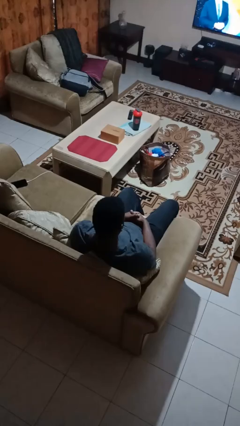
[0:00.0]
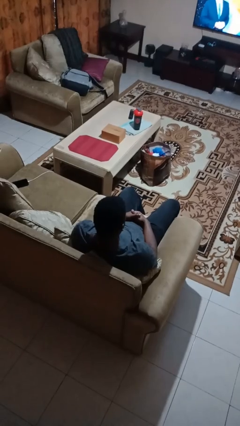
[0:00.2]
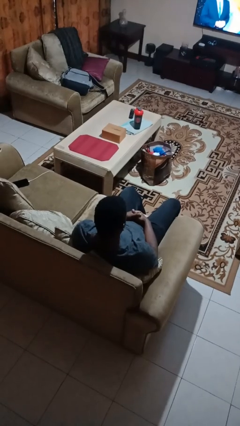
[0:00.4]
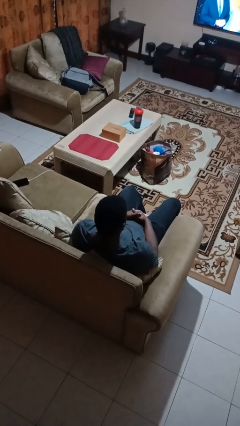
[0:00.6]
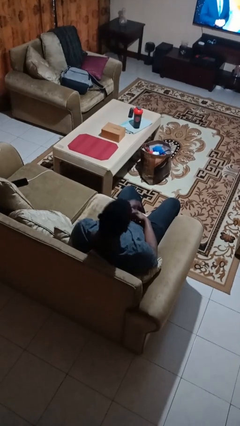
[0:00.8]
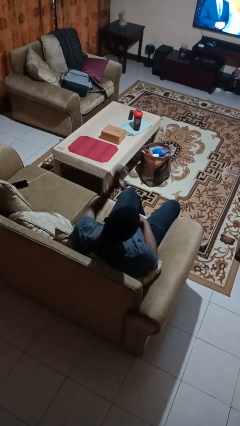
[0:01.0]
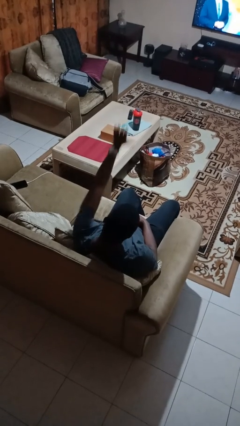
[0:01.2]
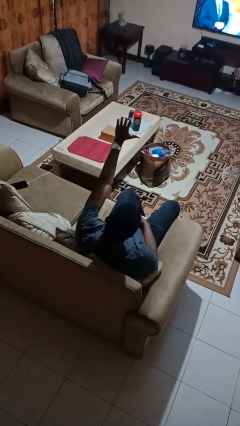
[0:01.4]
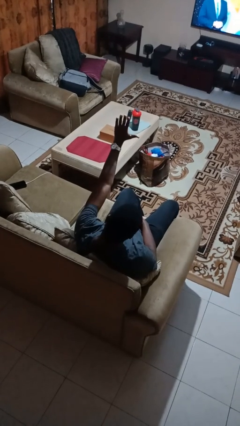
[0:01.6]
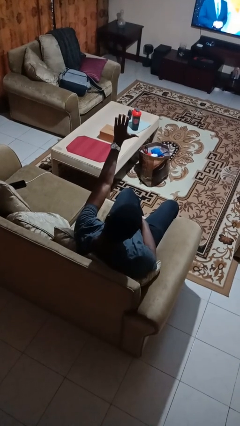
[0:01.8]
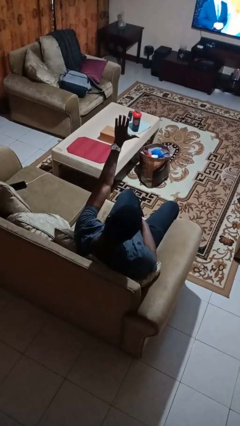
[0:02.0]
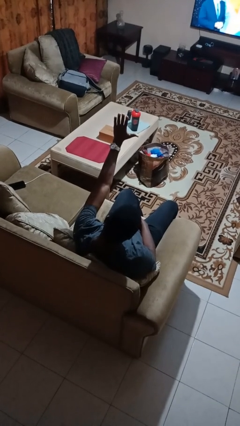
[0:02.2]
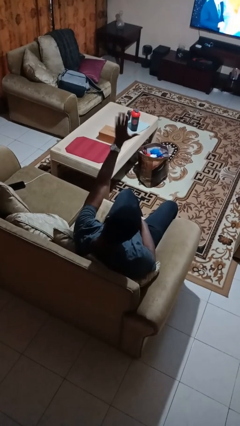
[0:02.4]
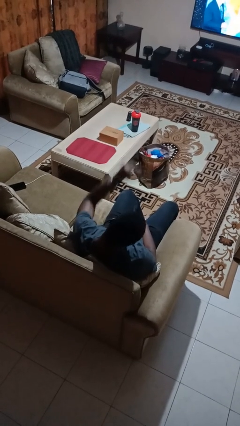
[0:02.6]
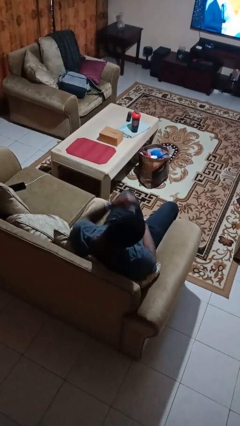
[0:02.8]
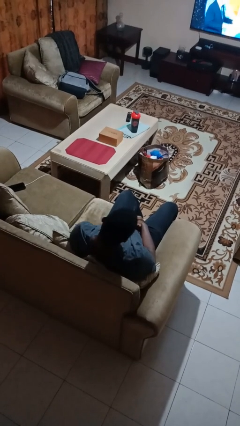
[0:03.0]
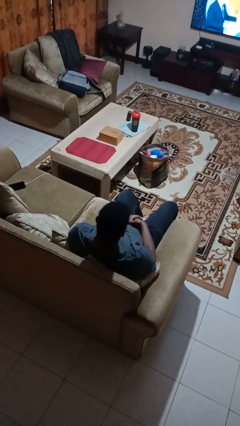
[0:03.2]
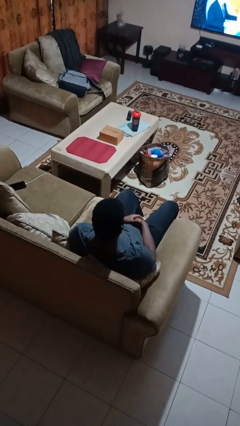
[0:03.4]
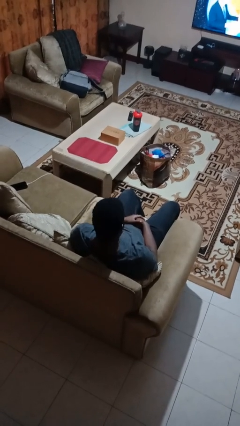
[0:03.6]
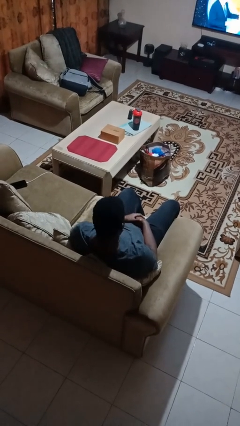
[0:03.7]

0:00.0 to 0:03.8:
person gestures stop

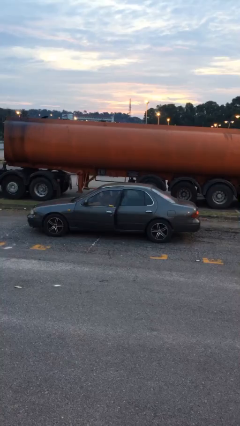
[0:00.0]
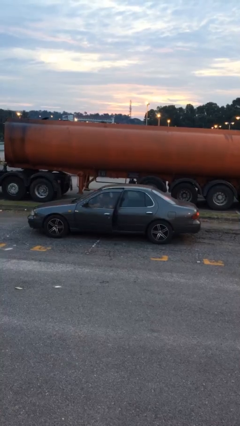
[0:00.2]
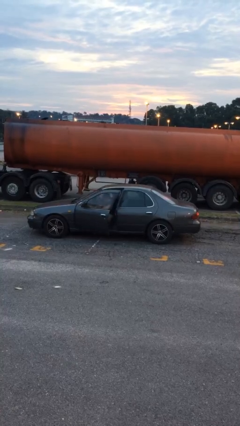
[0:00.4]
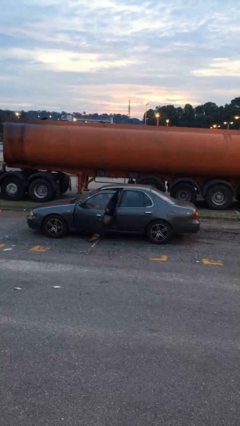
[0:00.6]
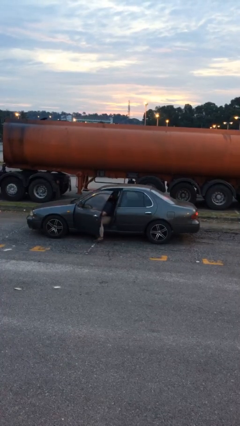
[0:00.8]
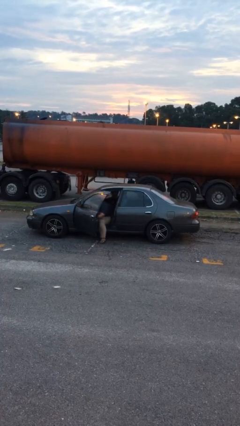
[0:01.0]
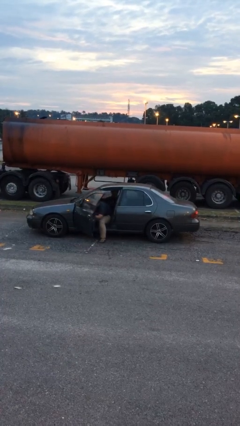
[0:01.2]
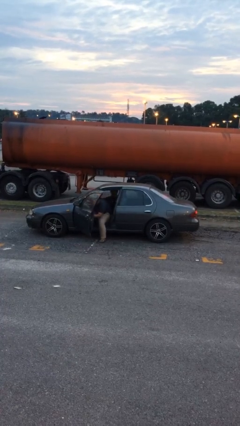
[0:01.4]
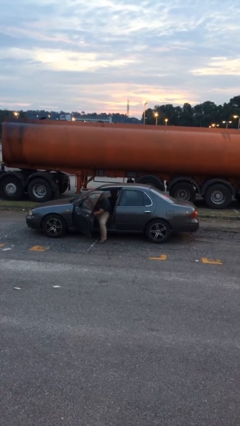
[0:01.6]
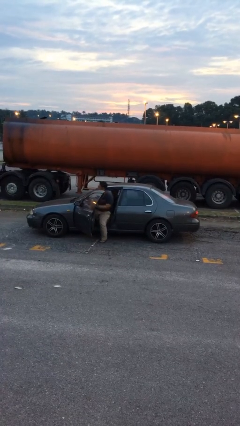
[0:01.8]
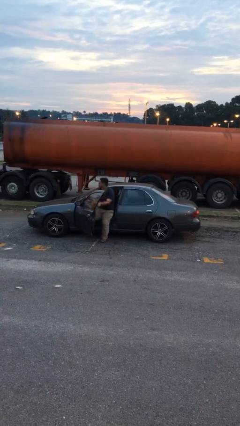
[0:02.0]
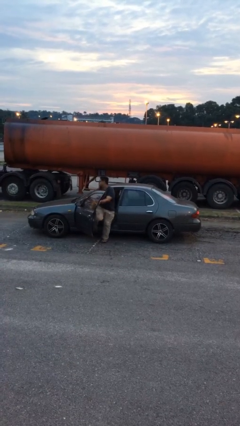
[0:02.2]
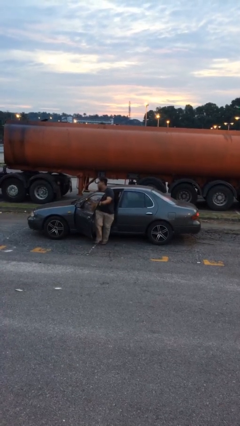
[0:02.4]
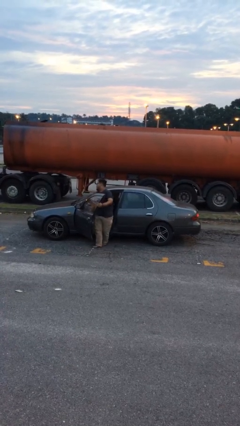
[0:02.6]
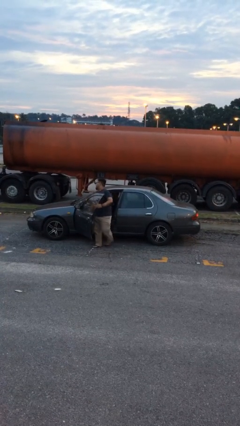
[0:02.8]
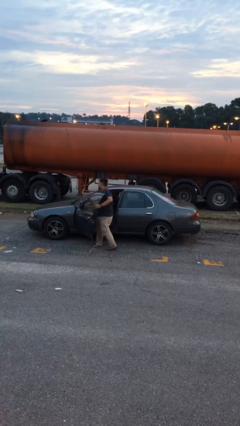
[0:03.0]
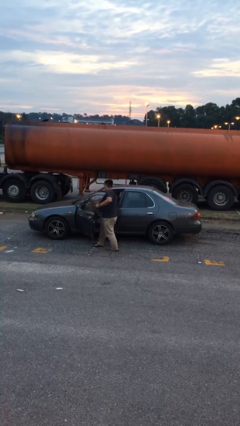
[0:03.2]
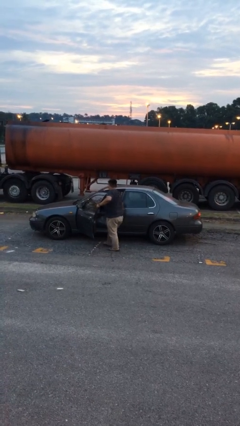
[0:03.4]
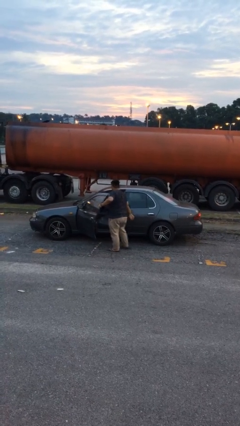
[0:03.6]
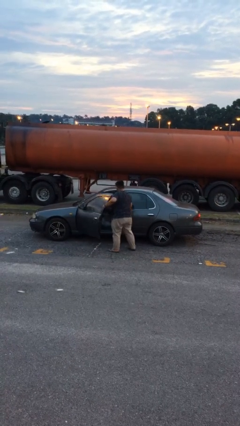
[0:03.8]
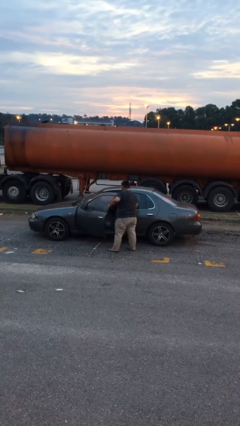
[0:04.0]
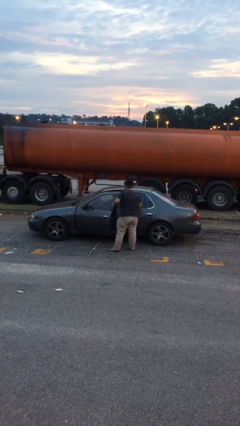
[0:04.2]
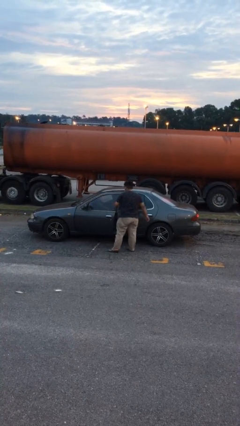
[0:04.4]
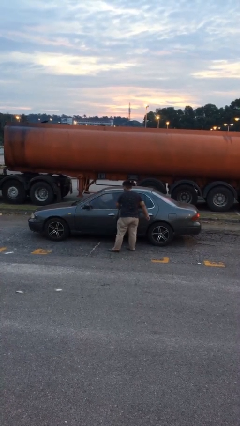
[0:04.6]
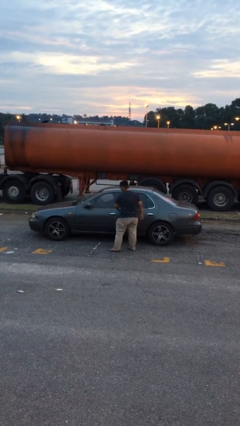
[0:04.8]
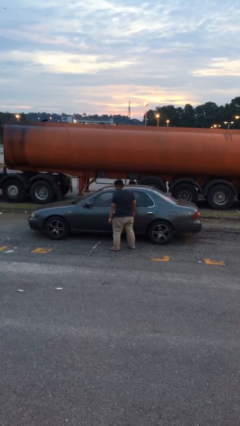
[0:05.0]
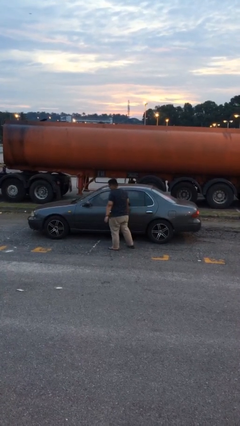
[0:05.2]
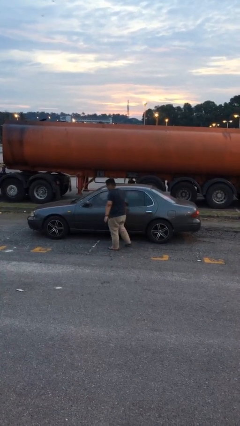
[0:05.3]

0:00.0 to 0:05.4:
car drops off person

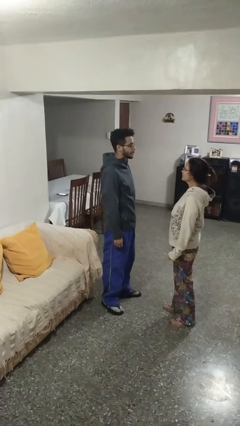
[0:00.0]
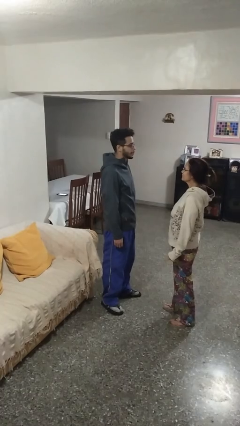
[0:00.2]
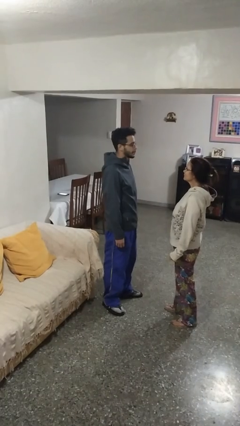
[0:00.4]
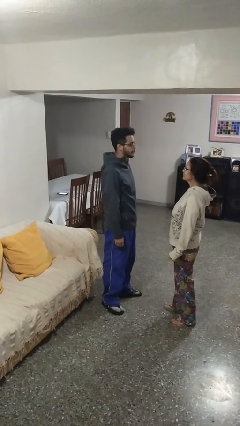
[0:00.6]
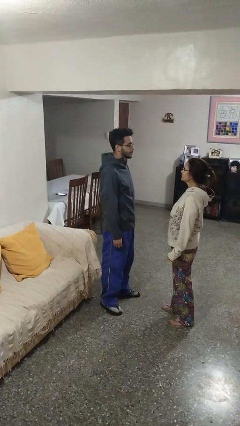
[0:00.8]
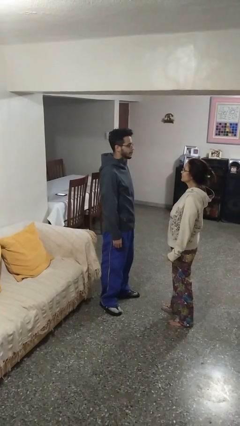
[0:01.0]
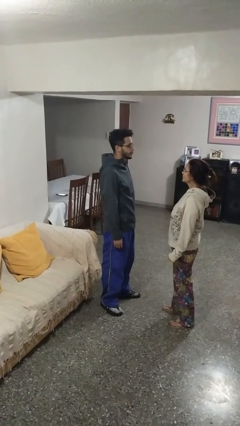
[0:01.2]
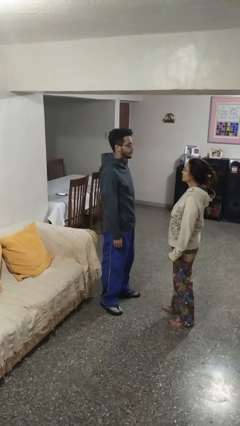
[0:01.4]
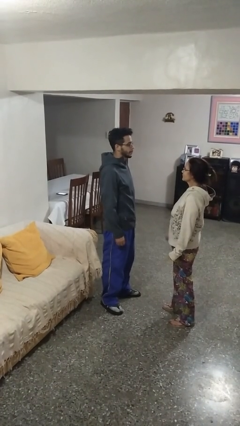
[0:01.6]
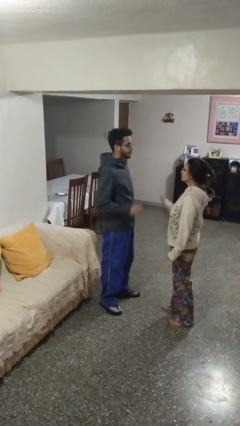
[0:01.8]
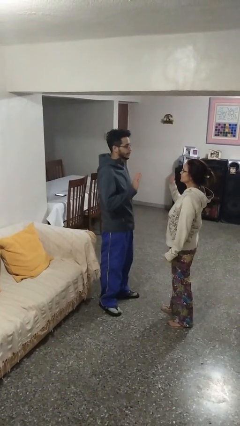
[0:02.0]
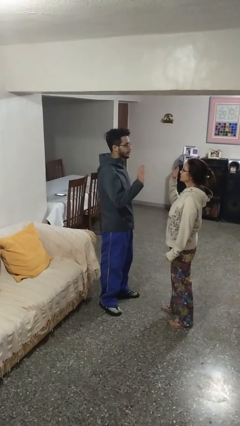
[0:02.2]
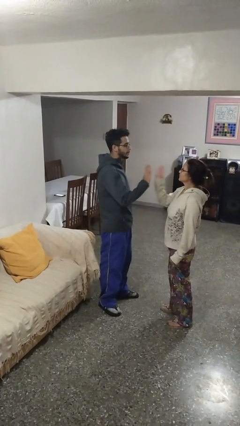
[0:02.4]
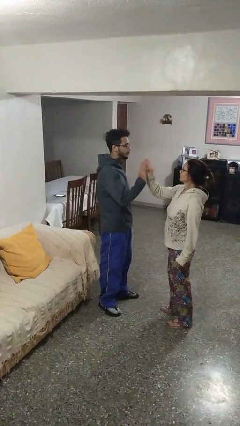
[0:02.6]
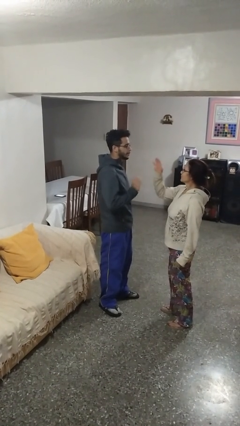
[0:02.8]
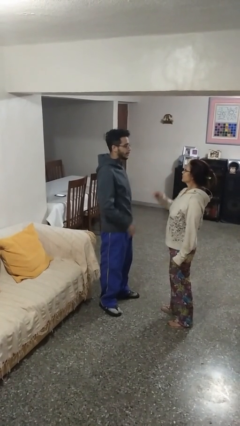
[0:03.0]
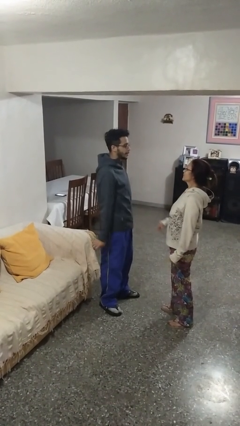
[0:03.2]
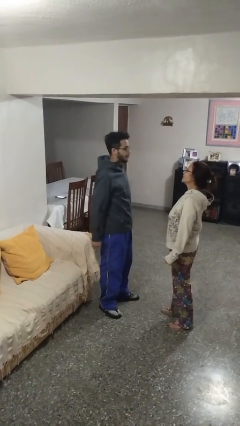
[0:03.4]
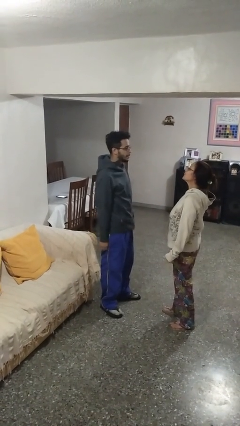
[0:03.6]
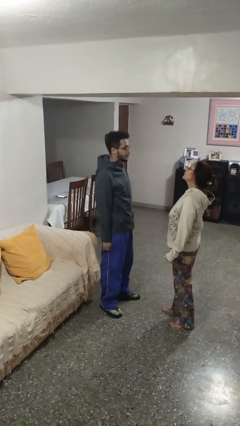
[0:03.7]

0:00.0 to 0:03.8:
person highfives hand

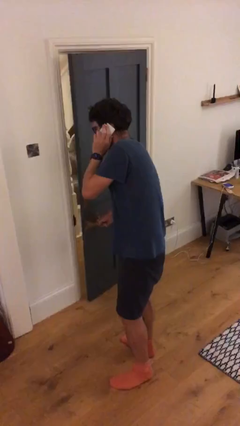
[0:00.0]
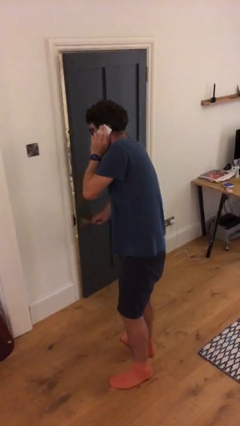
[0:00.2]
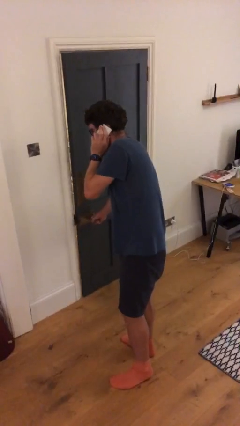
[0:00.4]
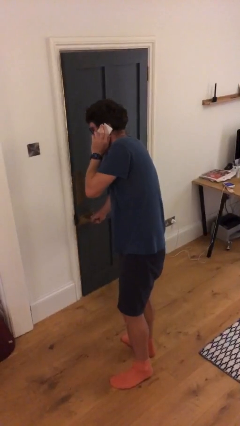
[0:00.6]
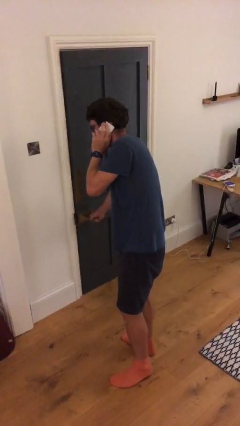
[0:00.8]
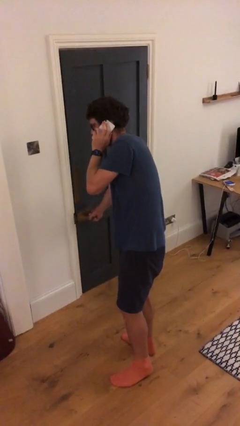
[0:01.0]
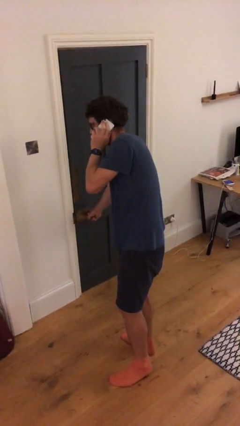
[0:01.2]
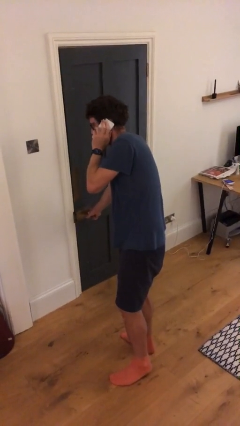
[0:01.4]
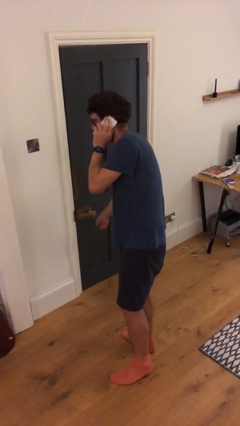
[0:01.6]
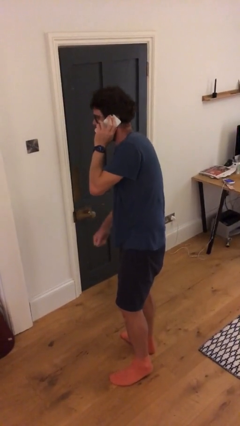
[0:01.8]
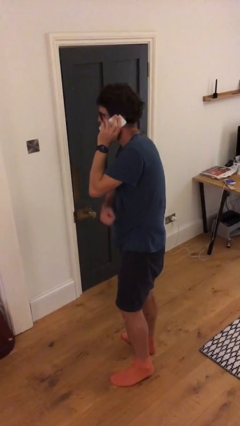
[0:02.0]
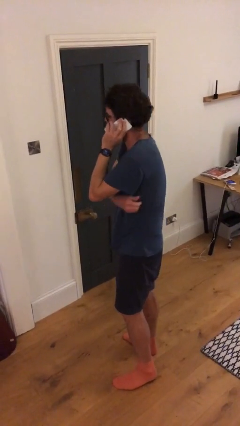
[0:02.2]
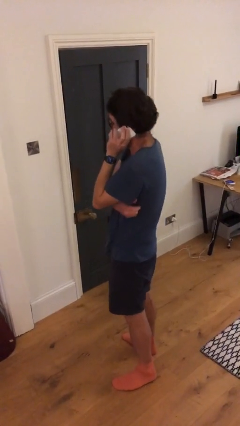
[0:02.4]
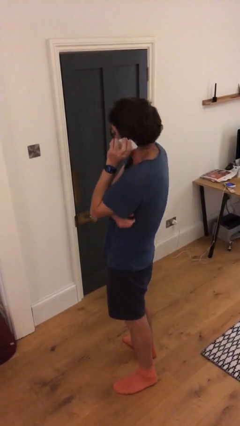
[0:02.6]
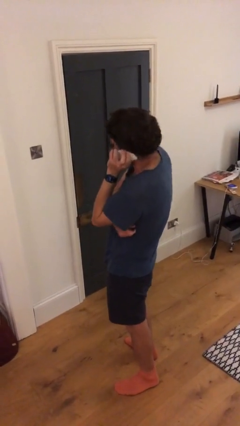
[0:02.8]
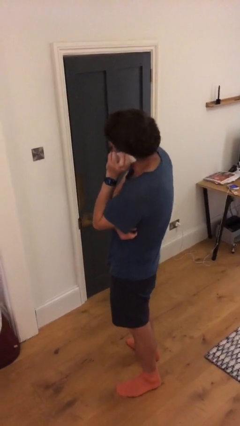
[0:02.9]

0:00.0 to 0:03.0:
person closes facility door
